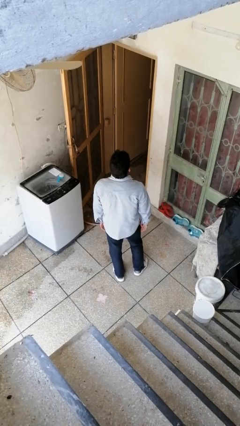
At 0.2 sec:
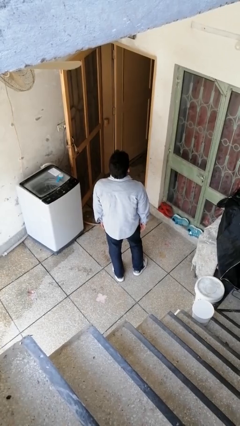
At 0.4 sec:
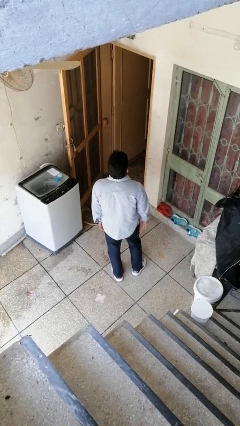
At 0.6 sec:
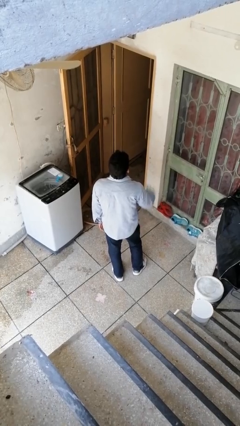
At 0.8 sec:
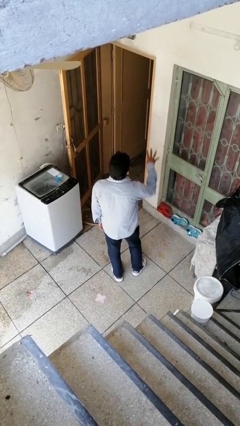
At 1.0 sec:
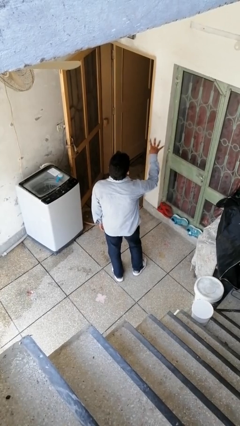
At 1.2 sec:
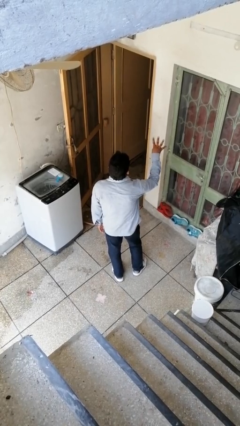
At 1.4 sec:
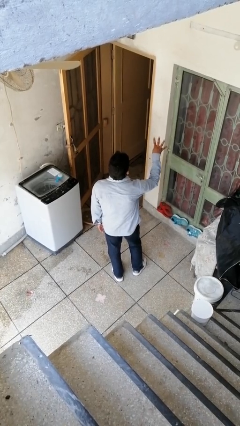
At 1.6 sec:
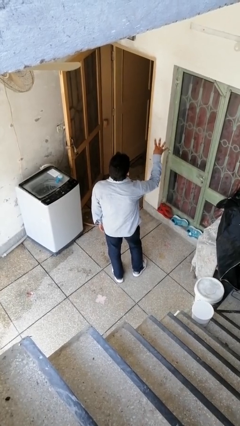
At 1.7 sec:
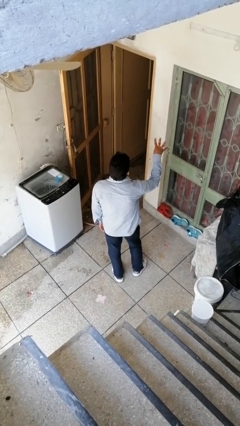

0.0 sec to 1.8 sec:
person gestures number four

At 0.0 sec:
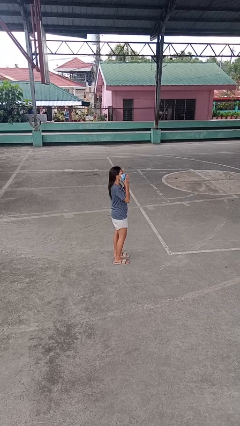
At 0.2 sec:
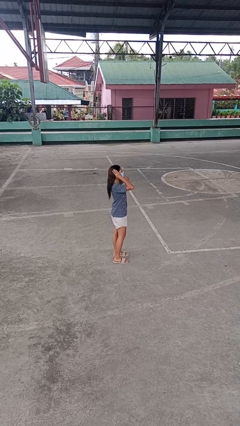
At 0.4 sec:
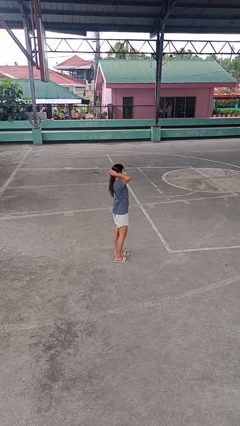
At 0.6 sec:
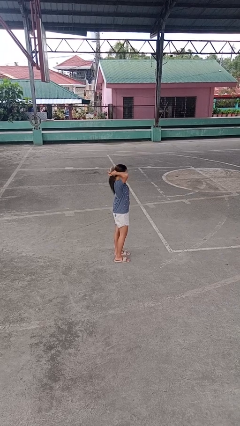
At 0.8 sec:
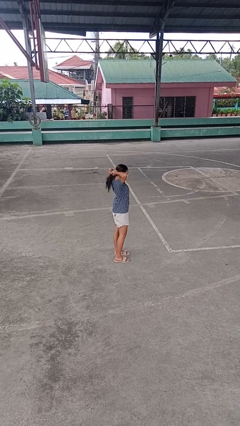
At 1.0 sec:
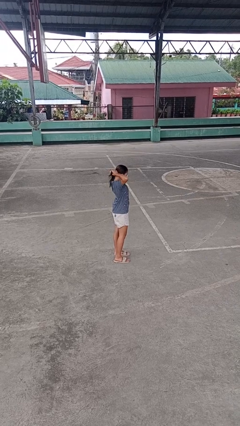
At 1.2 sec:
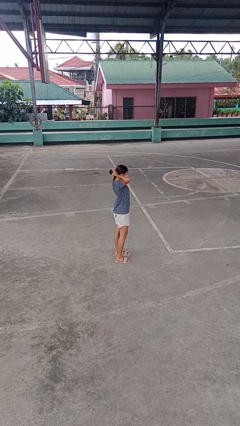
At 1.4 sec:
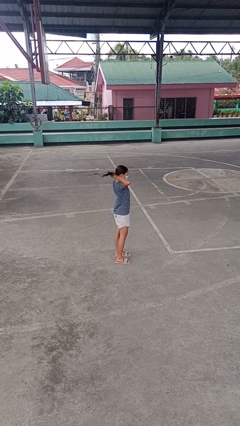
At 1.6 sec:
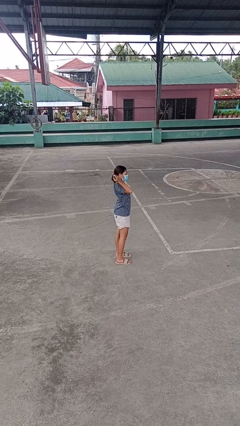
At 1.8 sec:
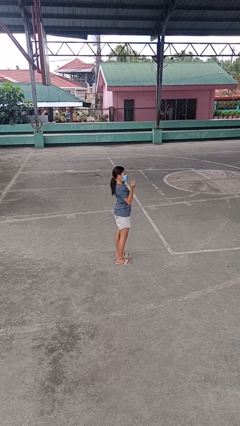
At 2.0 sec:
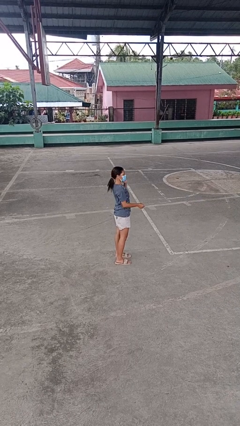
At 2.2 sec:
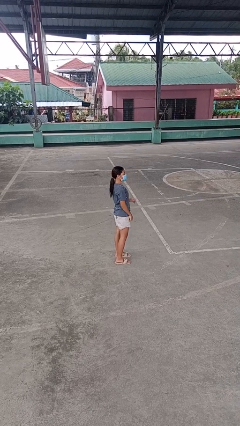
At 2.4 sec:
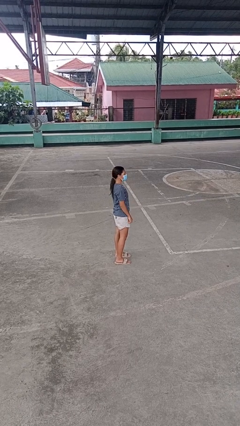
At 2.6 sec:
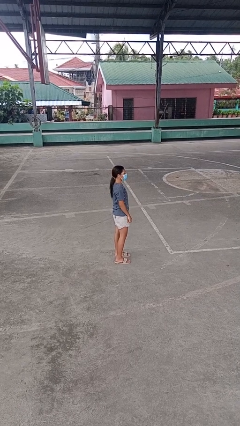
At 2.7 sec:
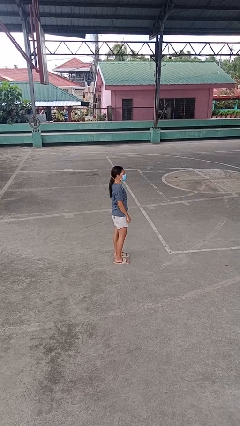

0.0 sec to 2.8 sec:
person puts hair in ponytail

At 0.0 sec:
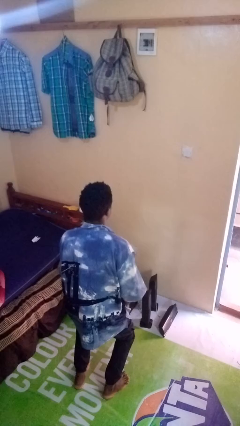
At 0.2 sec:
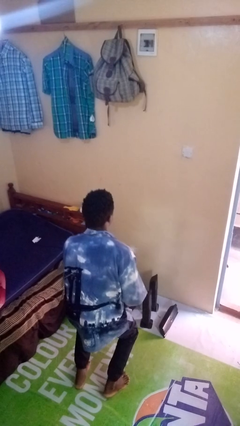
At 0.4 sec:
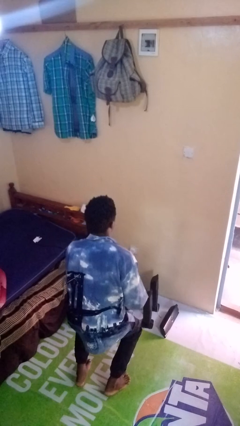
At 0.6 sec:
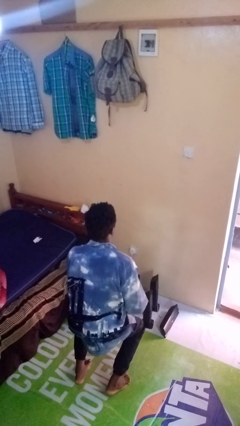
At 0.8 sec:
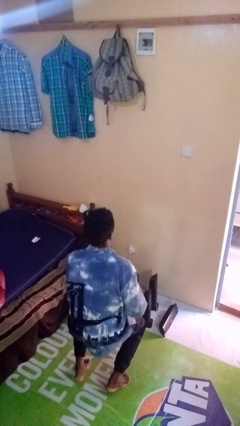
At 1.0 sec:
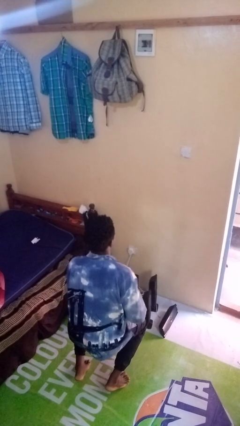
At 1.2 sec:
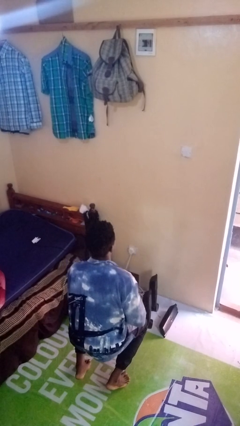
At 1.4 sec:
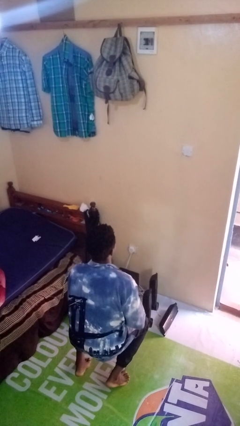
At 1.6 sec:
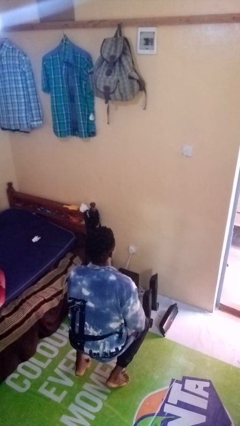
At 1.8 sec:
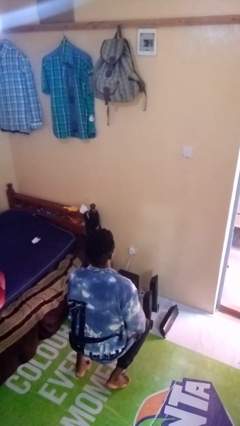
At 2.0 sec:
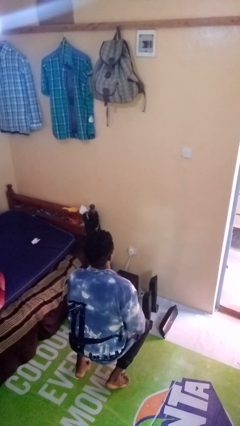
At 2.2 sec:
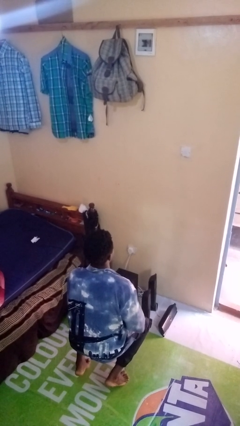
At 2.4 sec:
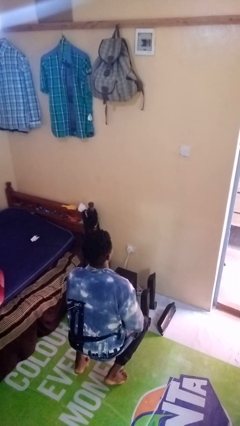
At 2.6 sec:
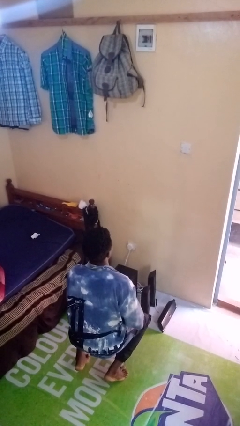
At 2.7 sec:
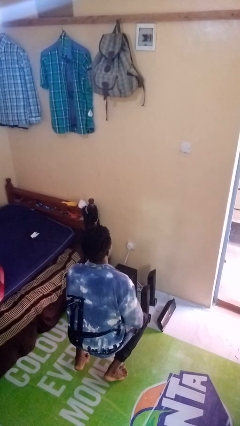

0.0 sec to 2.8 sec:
person squats

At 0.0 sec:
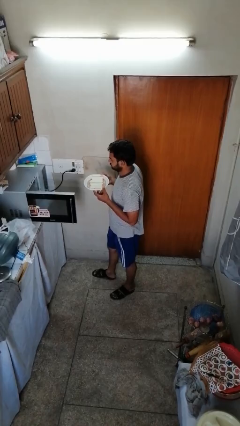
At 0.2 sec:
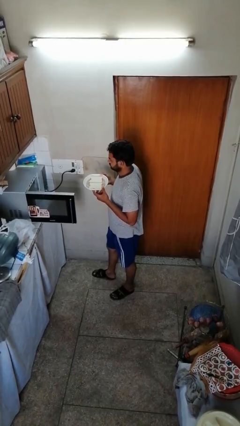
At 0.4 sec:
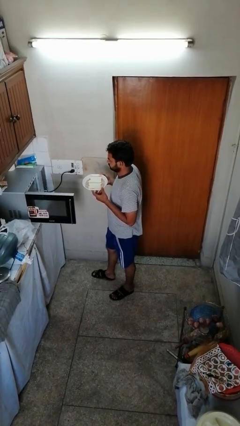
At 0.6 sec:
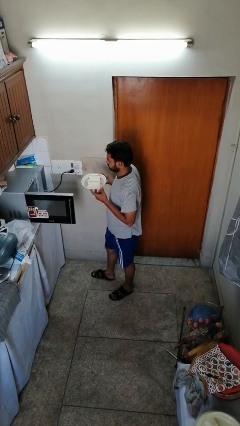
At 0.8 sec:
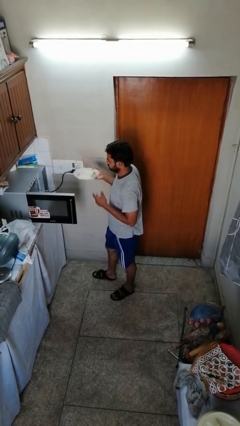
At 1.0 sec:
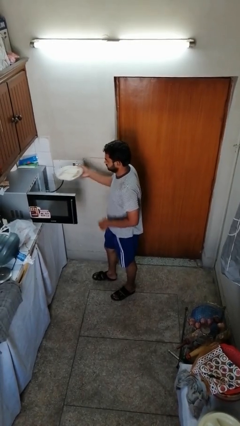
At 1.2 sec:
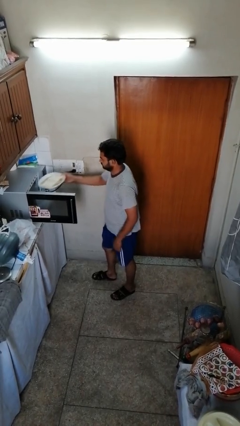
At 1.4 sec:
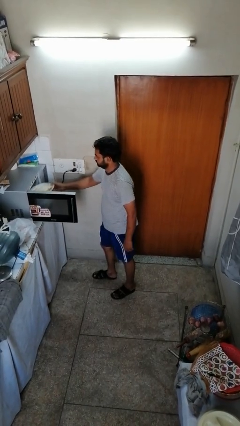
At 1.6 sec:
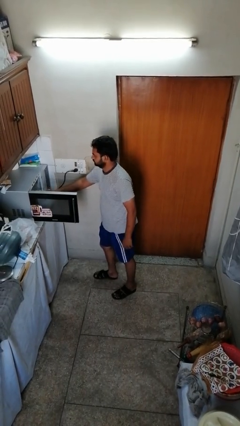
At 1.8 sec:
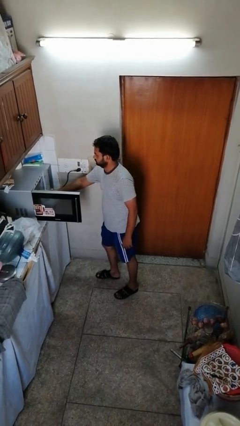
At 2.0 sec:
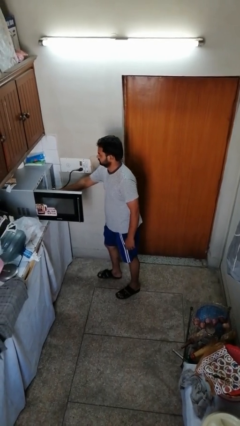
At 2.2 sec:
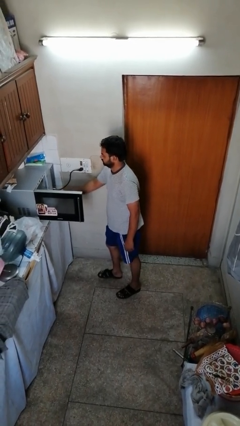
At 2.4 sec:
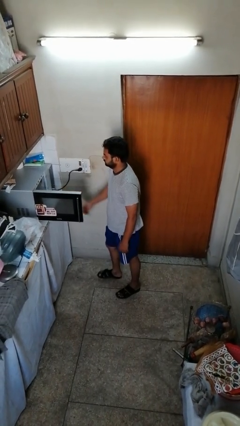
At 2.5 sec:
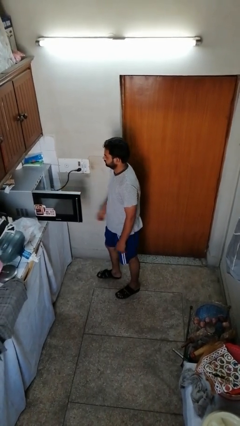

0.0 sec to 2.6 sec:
person puts object into oven

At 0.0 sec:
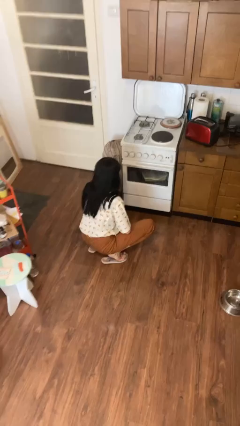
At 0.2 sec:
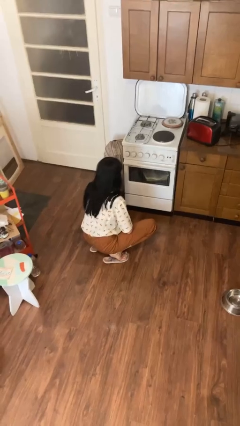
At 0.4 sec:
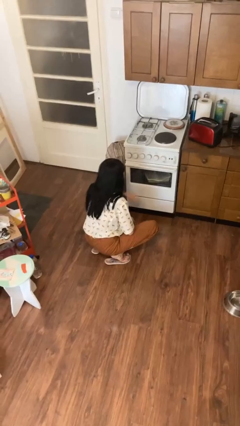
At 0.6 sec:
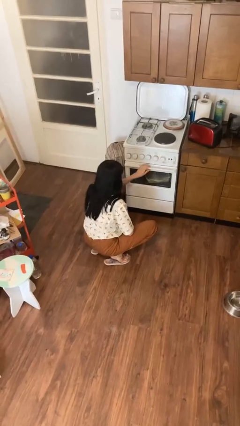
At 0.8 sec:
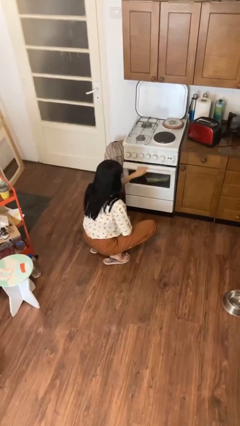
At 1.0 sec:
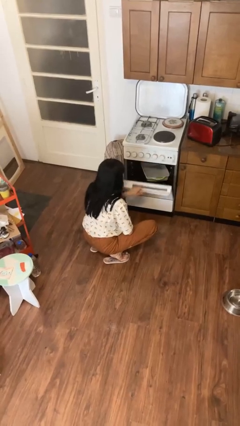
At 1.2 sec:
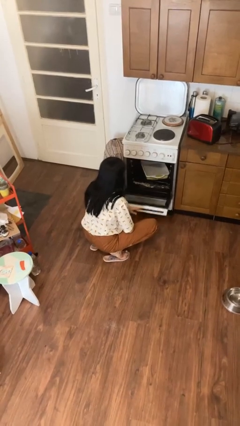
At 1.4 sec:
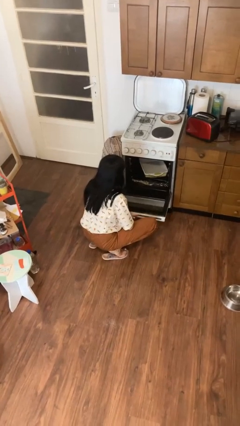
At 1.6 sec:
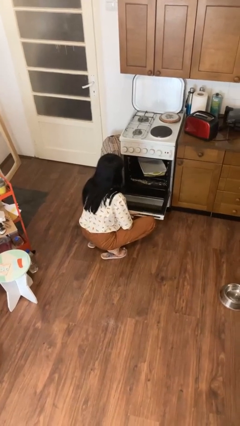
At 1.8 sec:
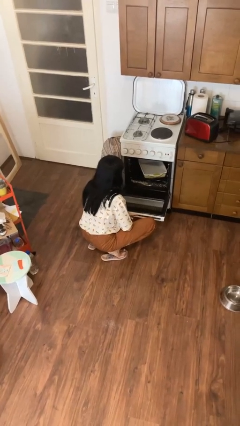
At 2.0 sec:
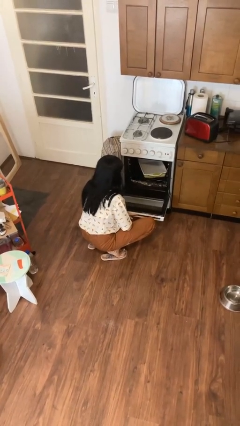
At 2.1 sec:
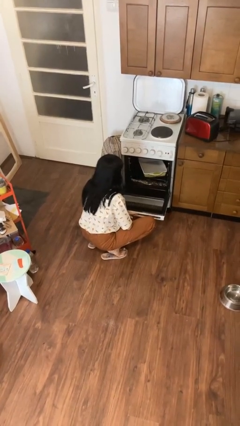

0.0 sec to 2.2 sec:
person opens oven door

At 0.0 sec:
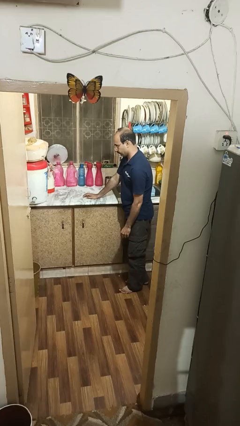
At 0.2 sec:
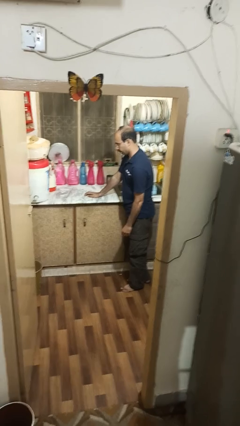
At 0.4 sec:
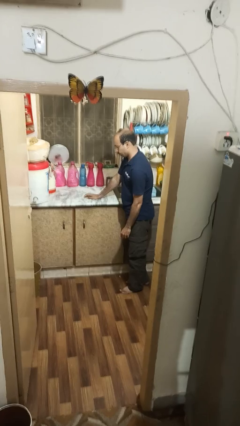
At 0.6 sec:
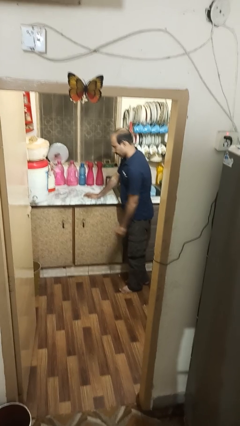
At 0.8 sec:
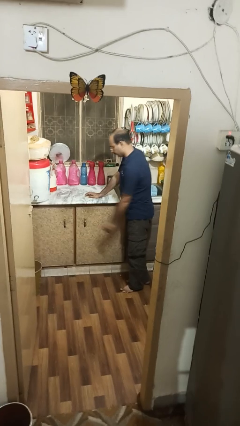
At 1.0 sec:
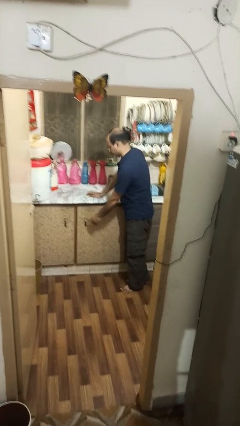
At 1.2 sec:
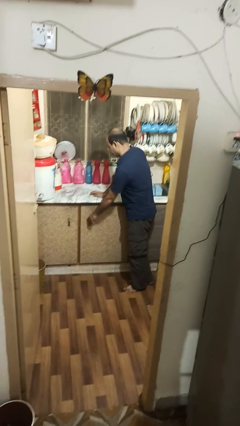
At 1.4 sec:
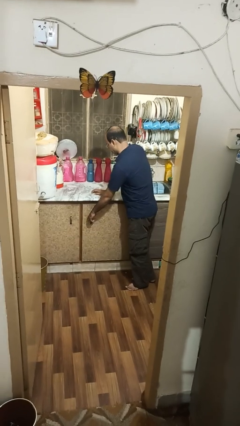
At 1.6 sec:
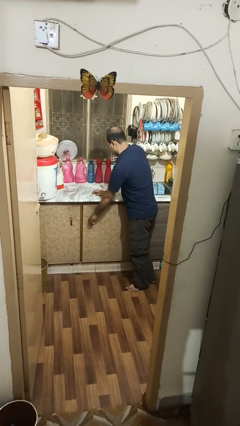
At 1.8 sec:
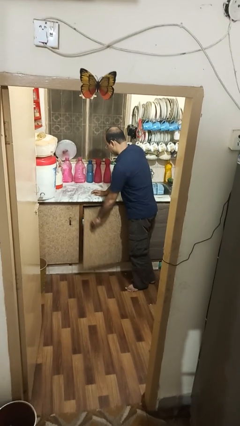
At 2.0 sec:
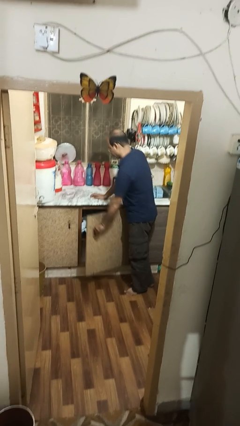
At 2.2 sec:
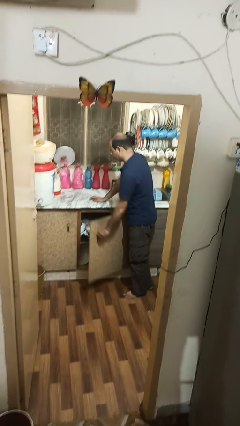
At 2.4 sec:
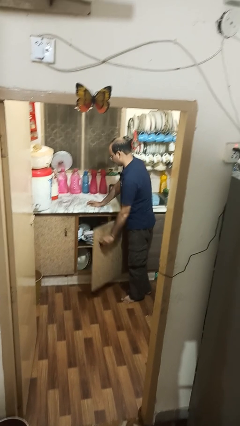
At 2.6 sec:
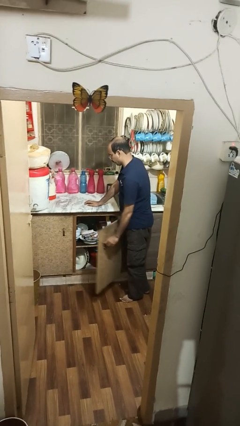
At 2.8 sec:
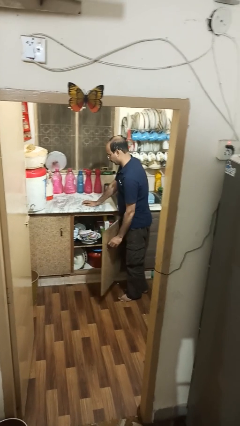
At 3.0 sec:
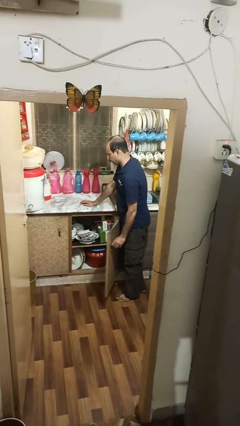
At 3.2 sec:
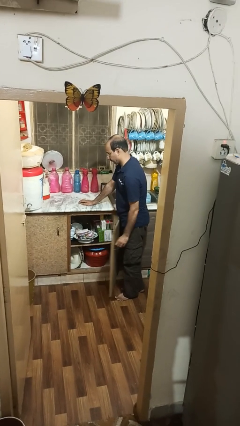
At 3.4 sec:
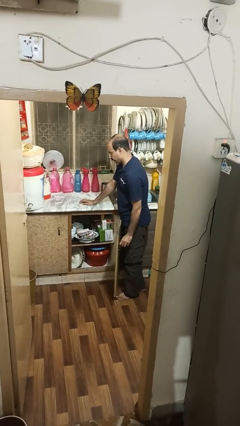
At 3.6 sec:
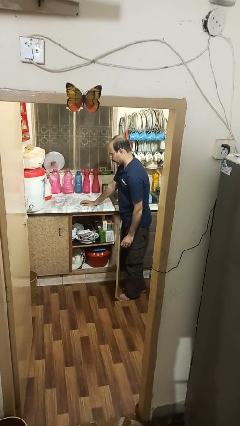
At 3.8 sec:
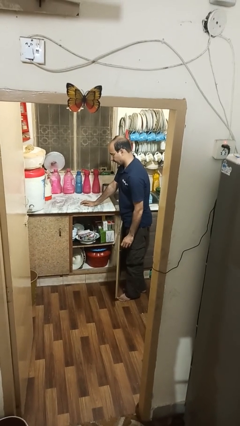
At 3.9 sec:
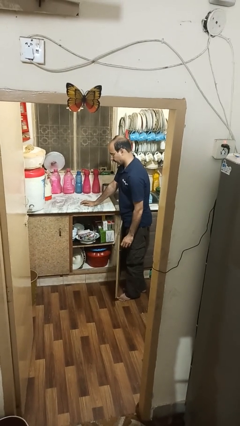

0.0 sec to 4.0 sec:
person opens cabinet

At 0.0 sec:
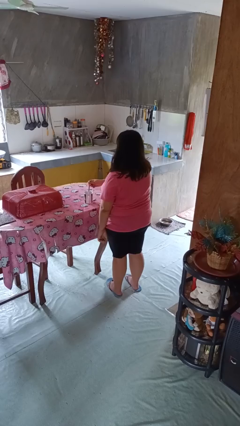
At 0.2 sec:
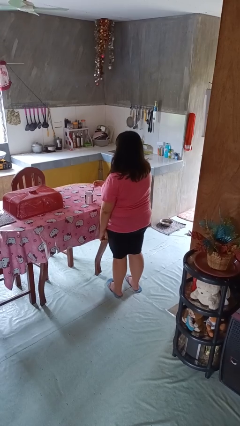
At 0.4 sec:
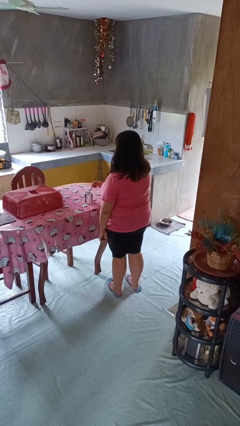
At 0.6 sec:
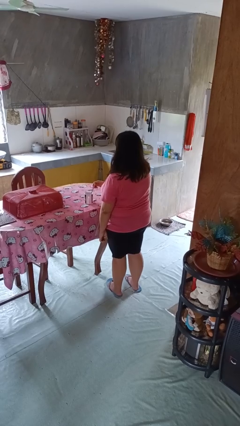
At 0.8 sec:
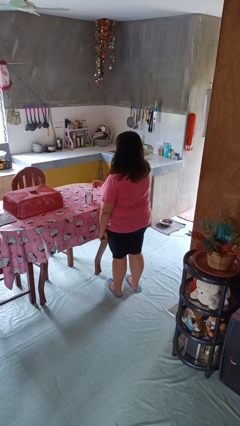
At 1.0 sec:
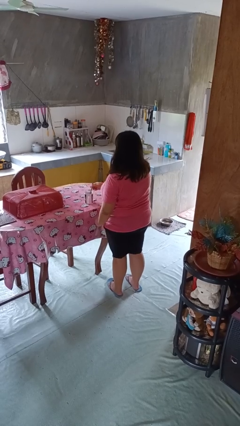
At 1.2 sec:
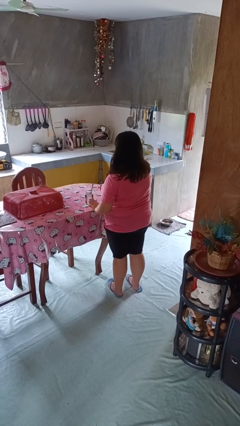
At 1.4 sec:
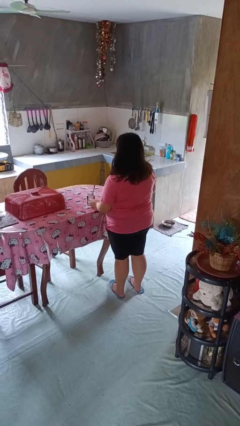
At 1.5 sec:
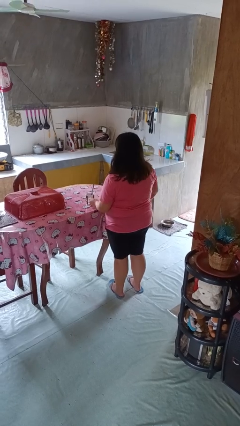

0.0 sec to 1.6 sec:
person stirs mug
